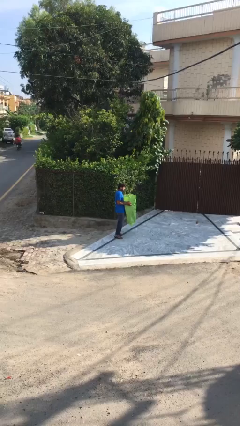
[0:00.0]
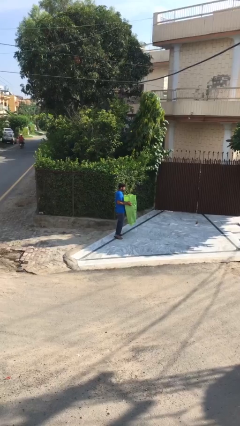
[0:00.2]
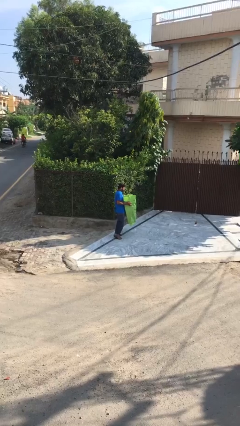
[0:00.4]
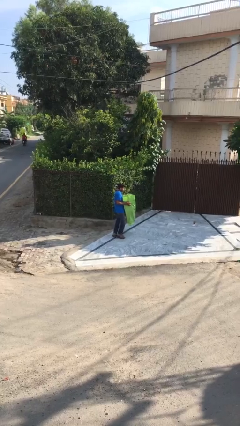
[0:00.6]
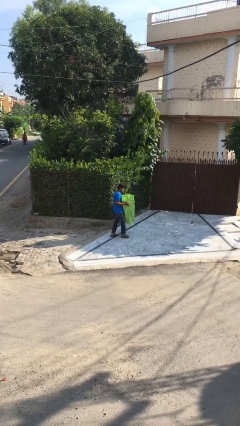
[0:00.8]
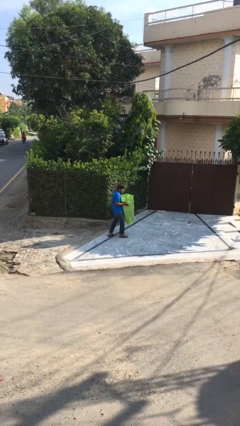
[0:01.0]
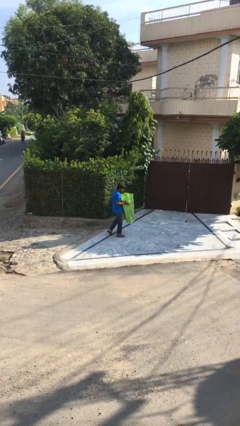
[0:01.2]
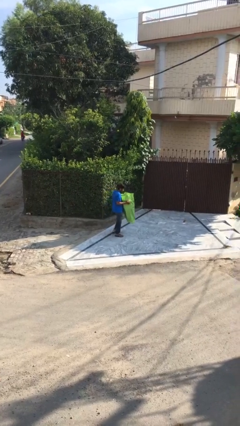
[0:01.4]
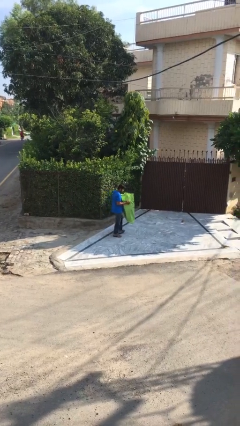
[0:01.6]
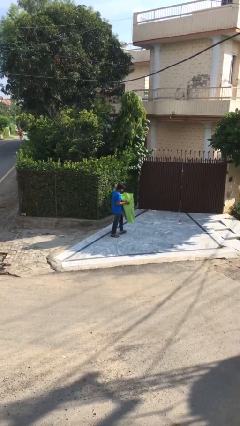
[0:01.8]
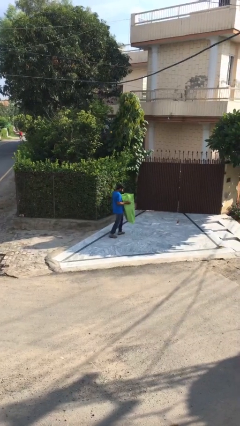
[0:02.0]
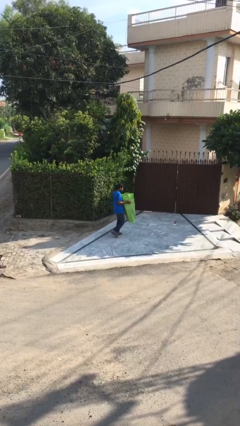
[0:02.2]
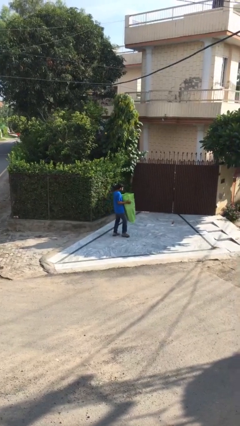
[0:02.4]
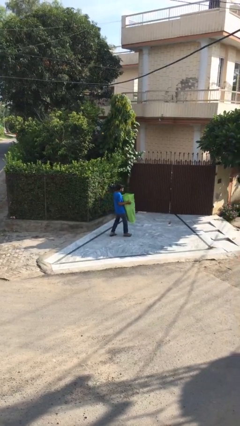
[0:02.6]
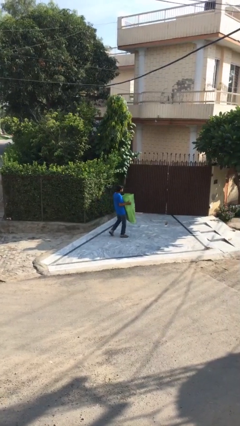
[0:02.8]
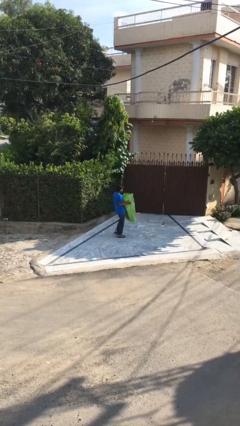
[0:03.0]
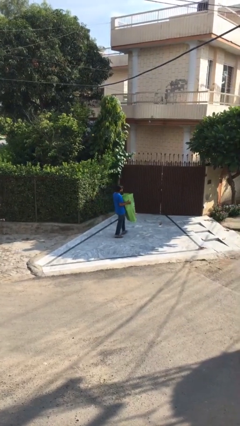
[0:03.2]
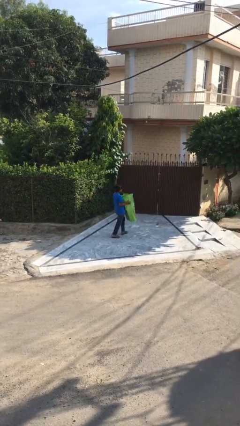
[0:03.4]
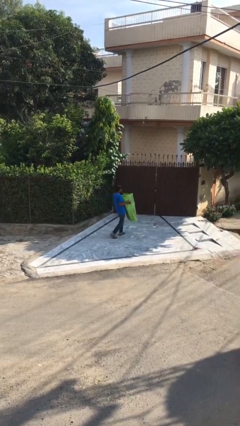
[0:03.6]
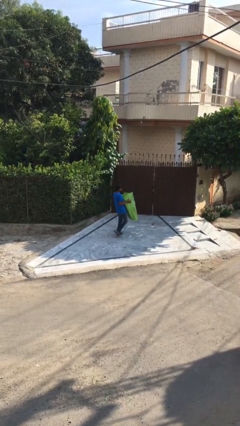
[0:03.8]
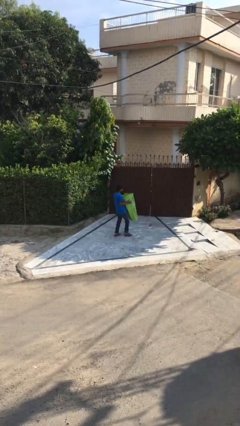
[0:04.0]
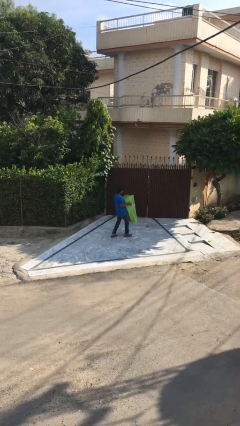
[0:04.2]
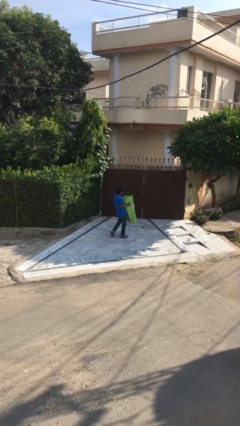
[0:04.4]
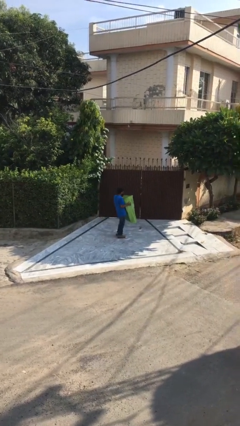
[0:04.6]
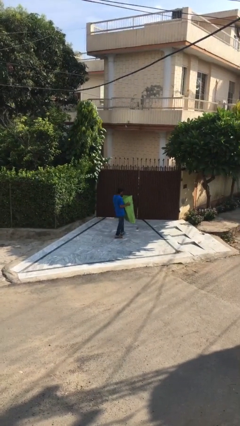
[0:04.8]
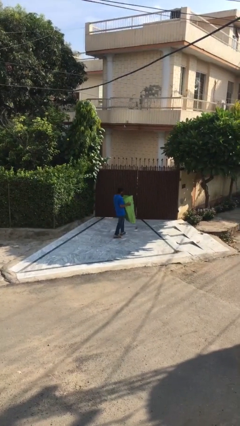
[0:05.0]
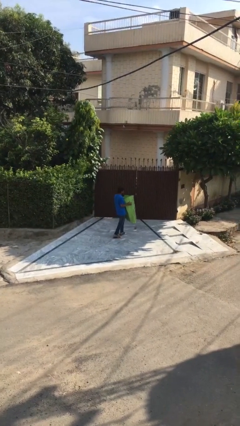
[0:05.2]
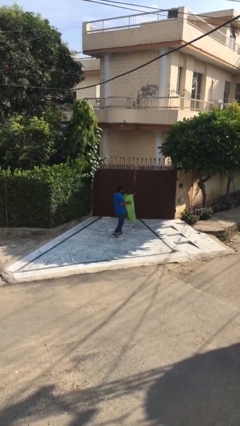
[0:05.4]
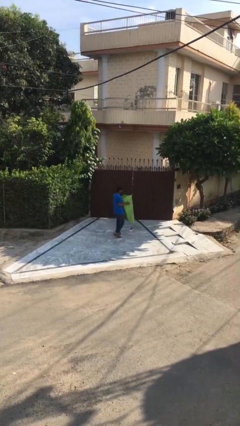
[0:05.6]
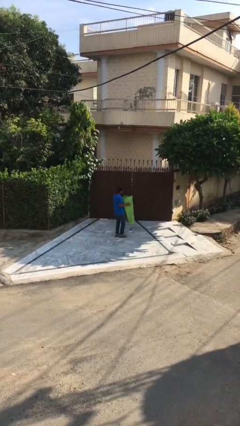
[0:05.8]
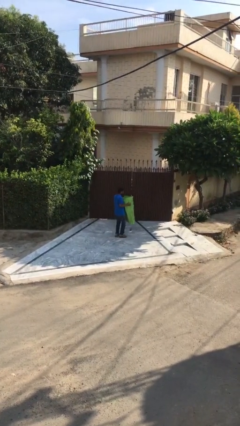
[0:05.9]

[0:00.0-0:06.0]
person carries heavy object

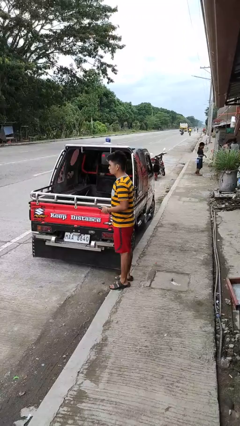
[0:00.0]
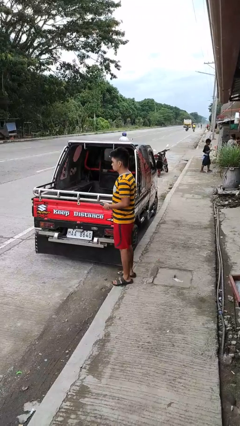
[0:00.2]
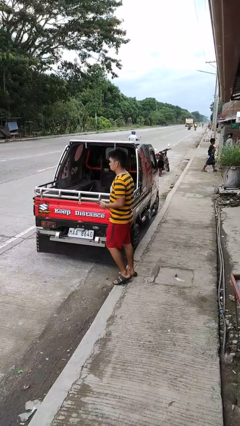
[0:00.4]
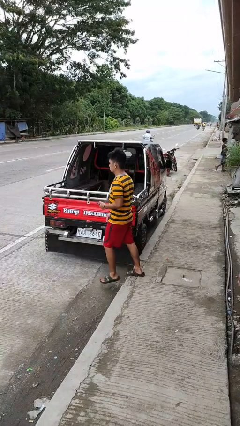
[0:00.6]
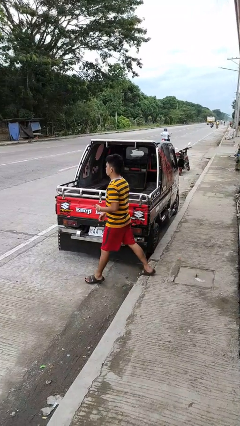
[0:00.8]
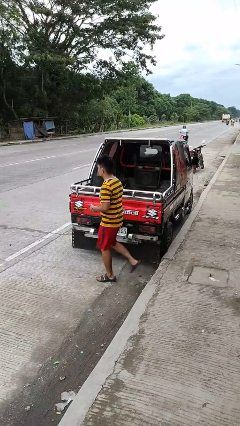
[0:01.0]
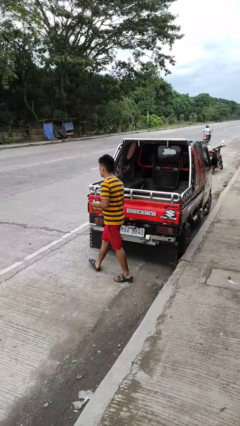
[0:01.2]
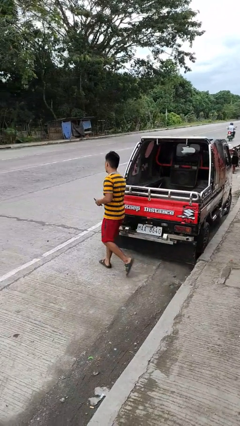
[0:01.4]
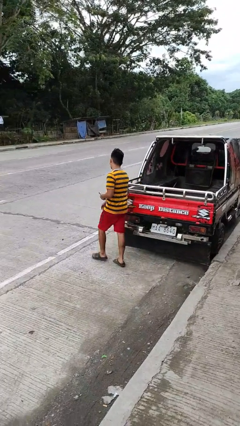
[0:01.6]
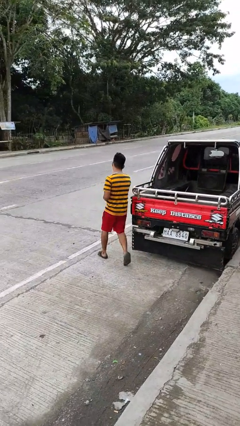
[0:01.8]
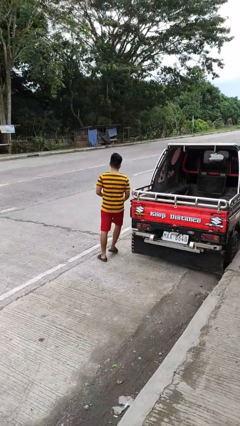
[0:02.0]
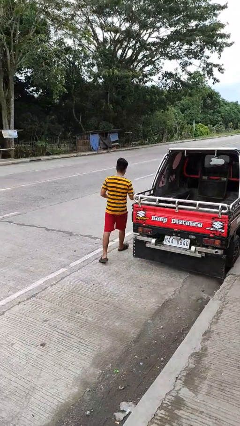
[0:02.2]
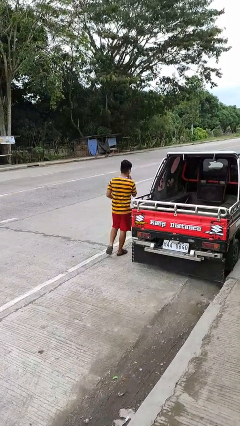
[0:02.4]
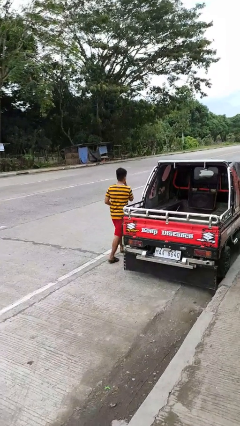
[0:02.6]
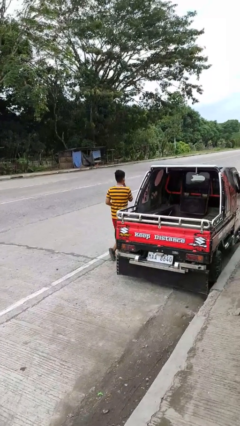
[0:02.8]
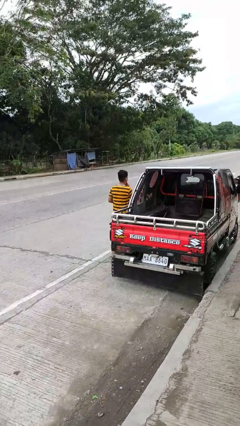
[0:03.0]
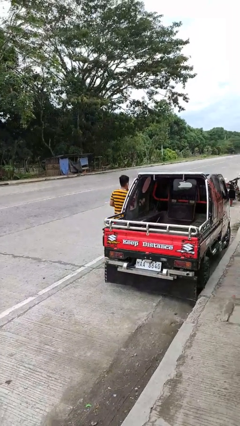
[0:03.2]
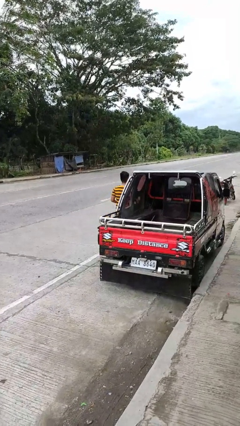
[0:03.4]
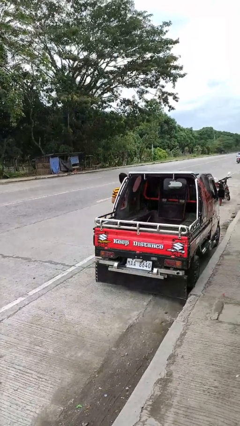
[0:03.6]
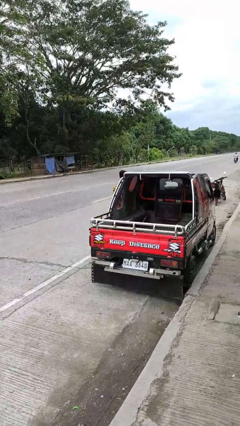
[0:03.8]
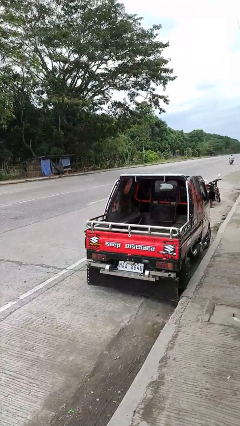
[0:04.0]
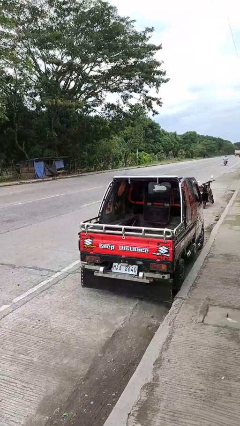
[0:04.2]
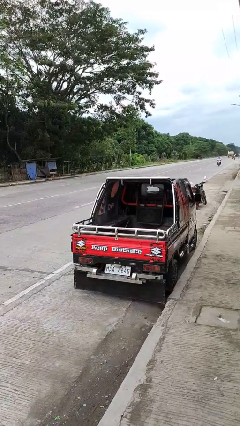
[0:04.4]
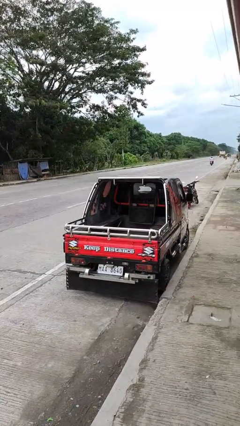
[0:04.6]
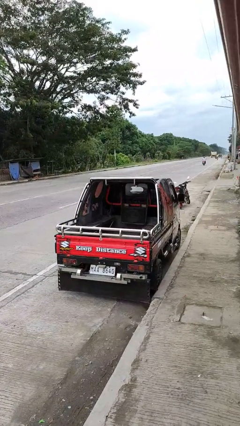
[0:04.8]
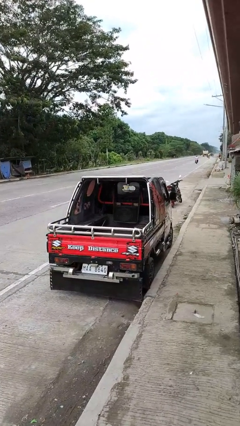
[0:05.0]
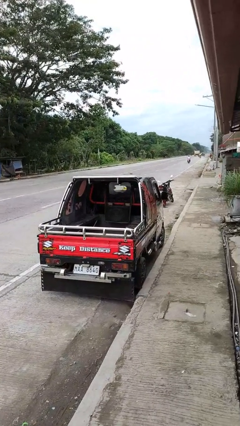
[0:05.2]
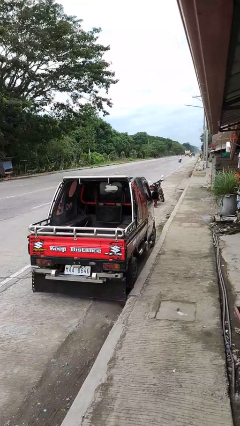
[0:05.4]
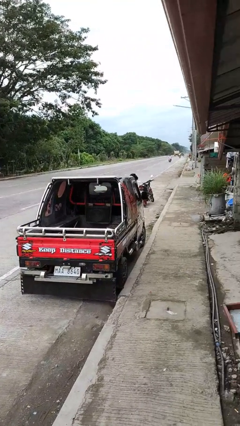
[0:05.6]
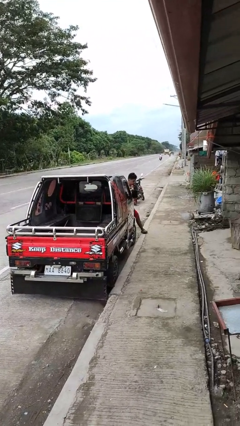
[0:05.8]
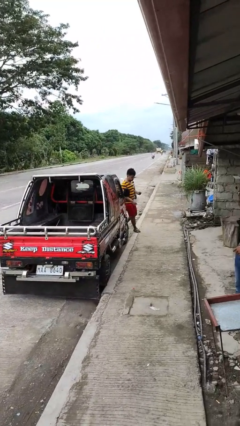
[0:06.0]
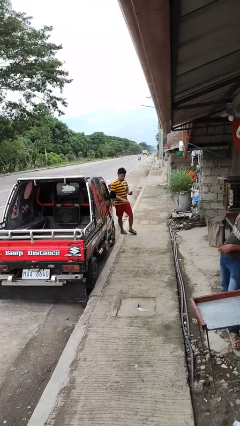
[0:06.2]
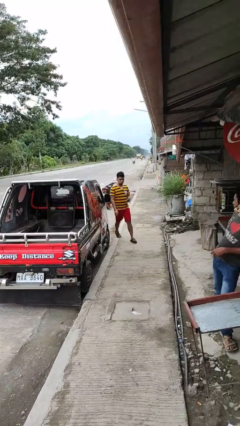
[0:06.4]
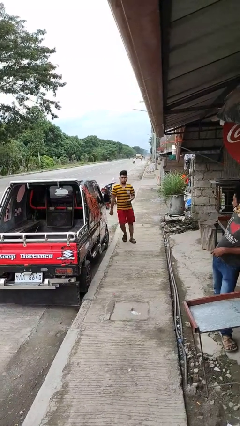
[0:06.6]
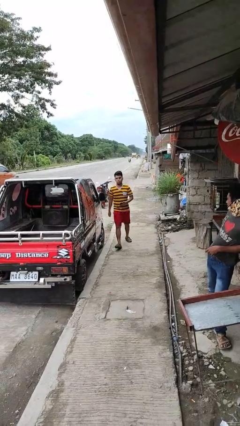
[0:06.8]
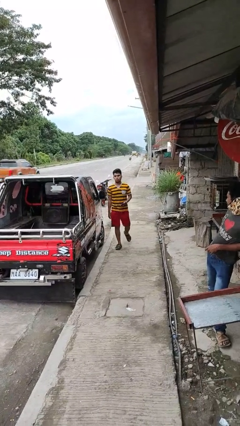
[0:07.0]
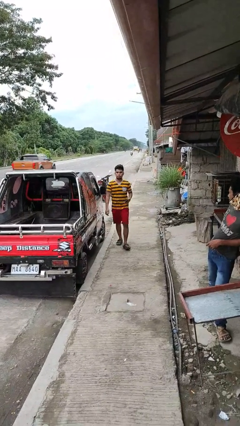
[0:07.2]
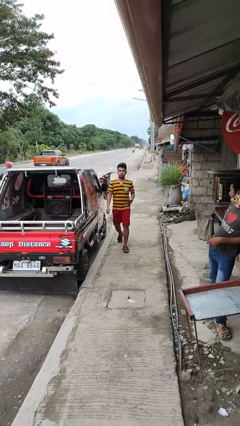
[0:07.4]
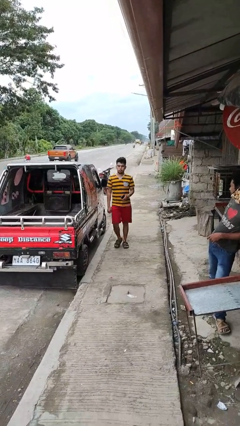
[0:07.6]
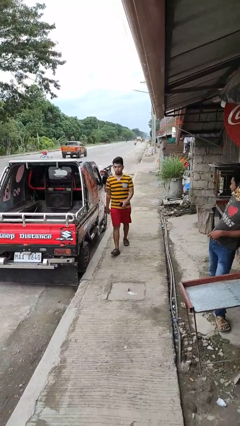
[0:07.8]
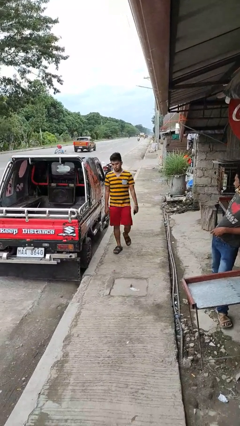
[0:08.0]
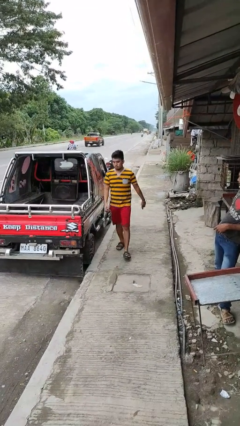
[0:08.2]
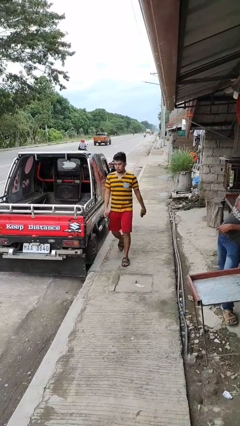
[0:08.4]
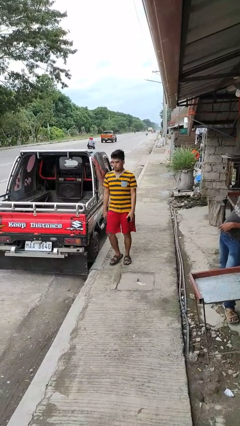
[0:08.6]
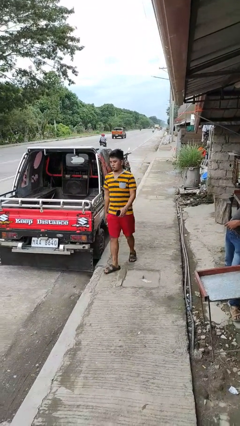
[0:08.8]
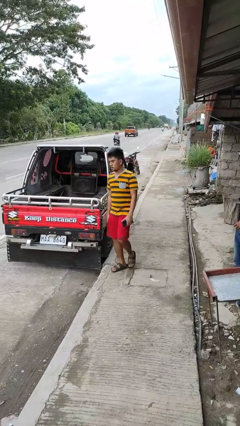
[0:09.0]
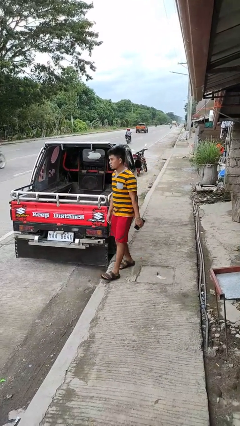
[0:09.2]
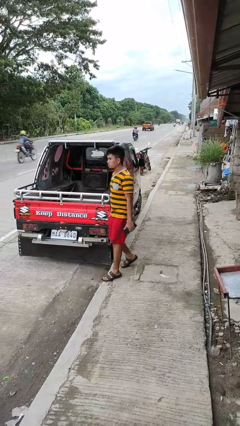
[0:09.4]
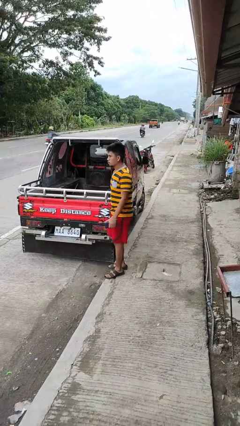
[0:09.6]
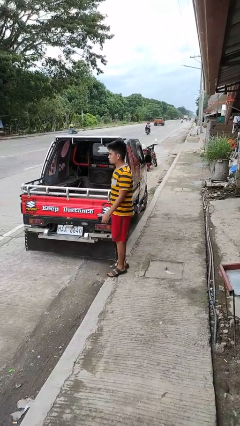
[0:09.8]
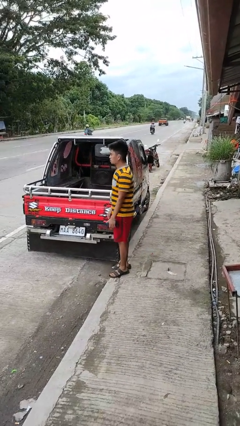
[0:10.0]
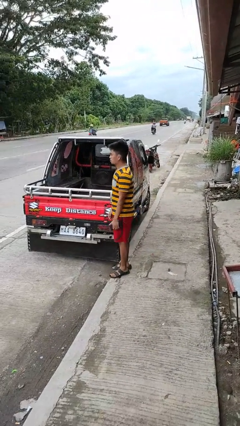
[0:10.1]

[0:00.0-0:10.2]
person walks around car

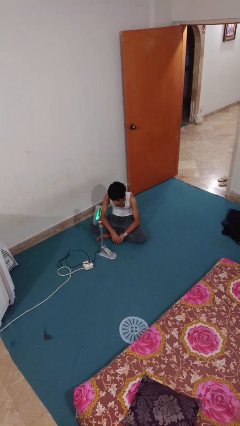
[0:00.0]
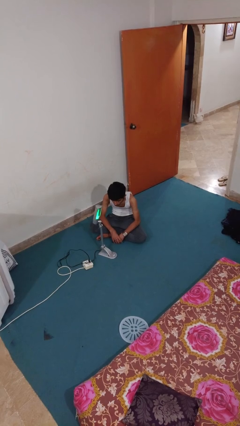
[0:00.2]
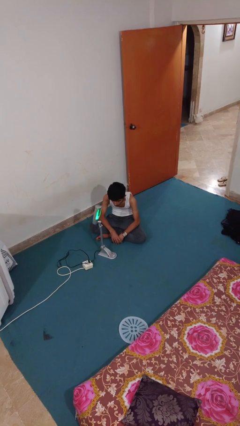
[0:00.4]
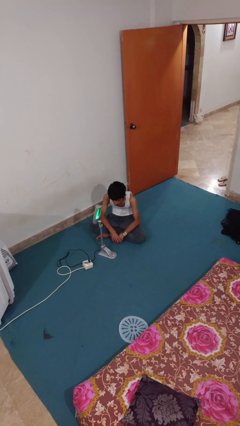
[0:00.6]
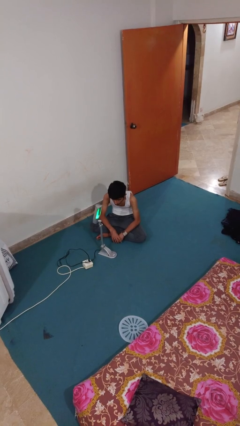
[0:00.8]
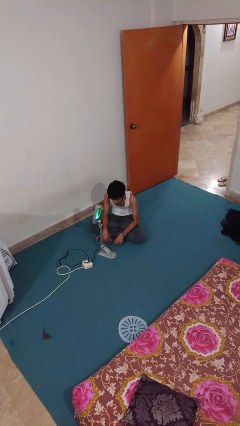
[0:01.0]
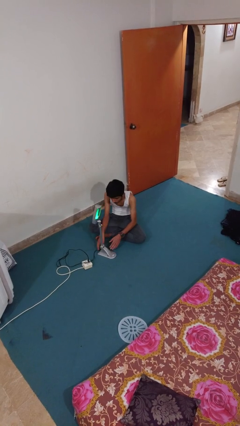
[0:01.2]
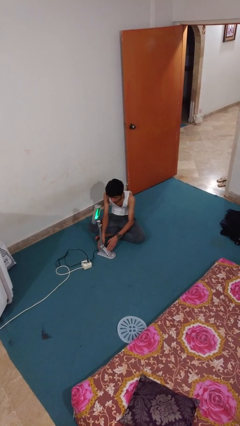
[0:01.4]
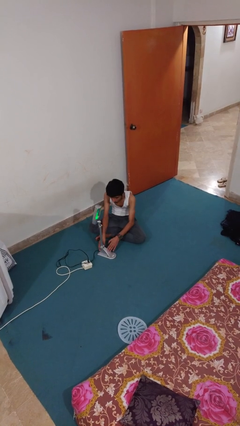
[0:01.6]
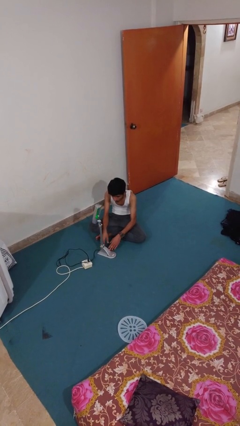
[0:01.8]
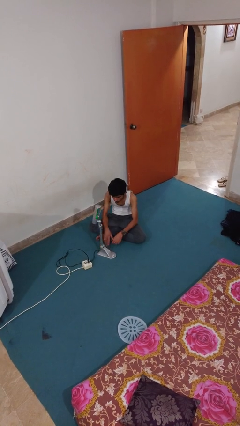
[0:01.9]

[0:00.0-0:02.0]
person turns off lamp
